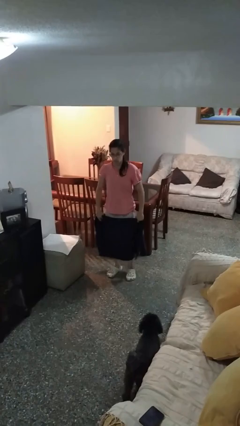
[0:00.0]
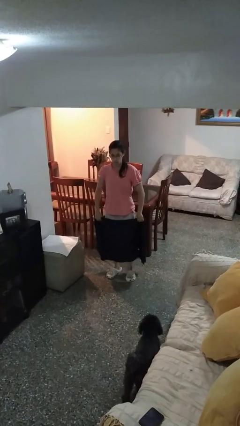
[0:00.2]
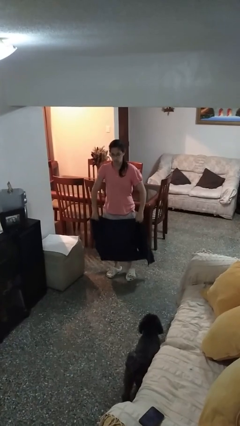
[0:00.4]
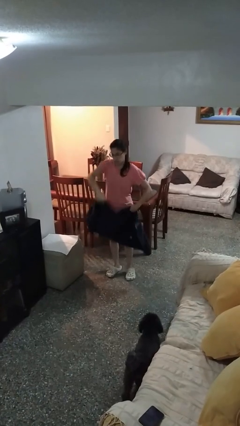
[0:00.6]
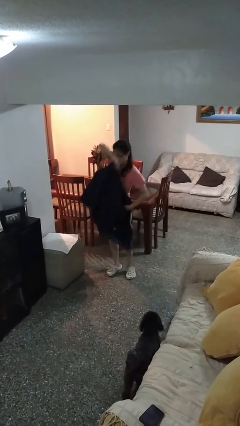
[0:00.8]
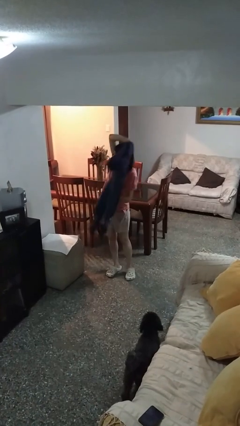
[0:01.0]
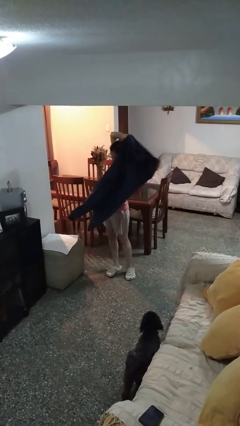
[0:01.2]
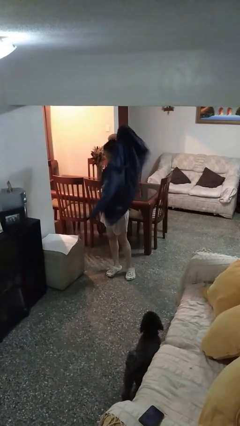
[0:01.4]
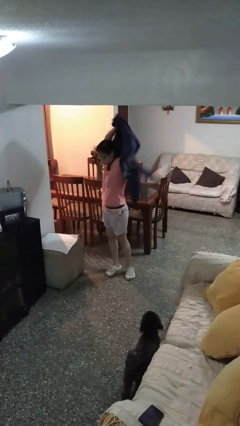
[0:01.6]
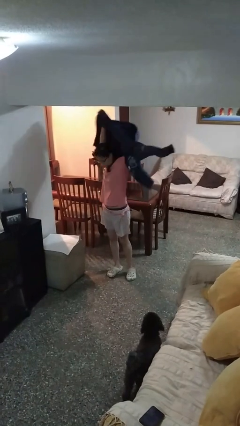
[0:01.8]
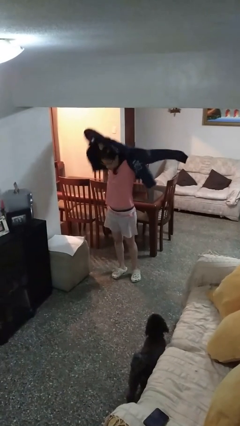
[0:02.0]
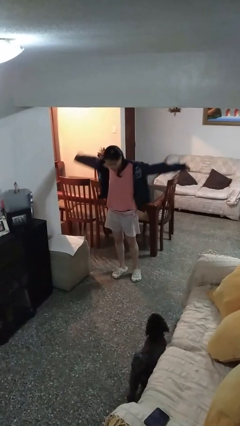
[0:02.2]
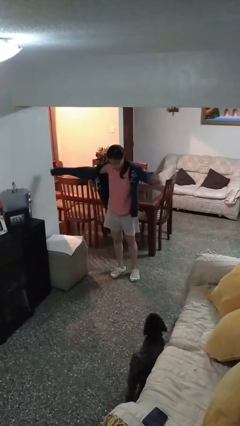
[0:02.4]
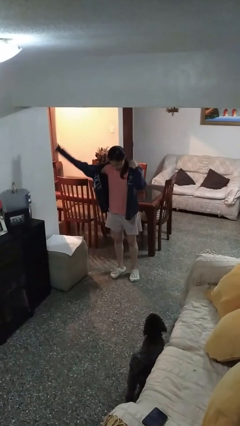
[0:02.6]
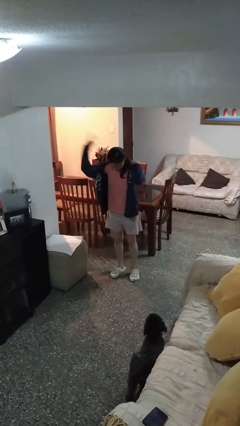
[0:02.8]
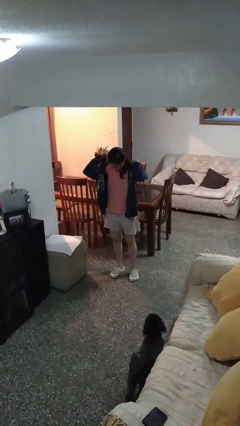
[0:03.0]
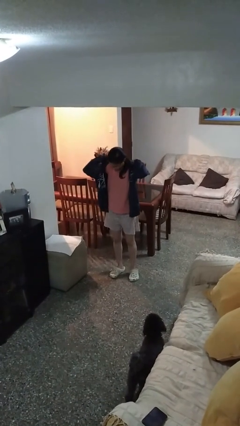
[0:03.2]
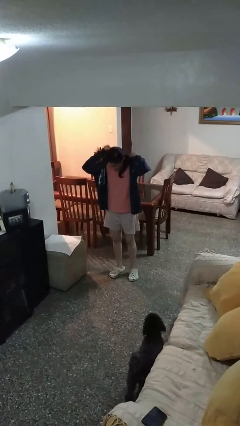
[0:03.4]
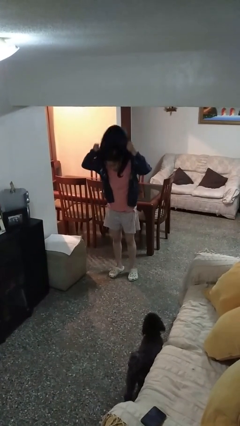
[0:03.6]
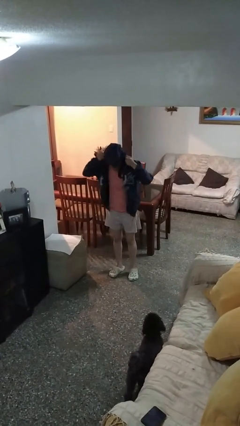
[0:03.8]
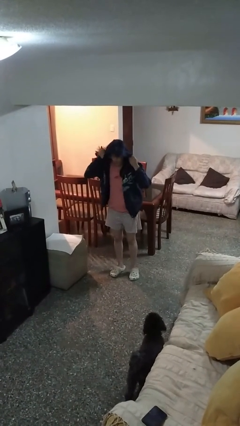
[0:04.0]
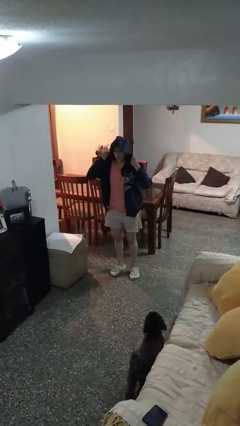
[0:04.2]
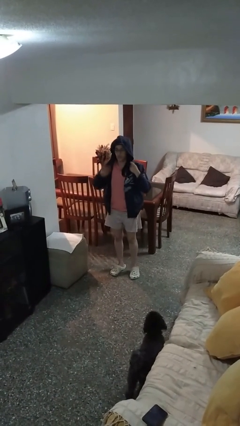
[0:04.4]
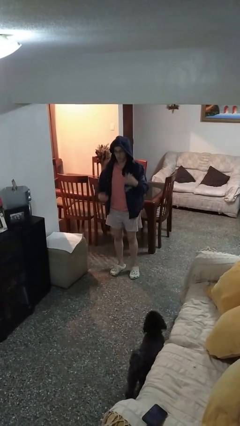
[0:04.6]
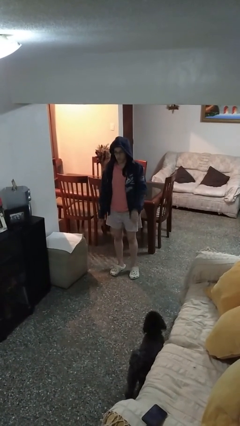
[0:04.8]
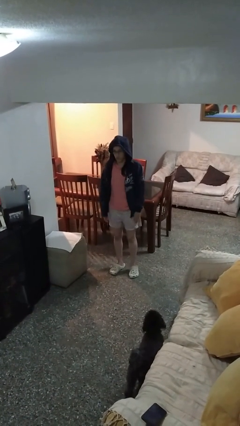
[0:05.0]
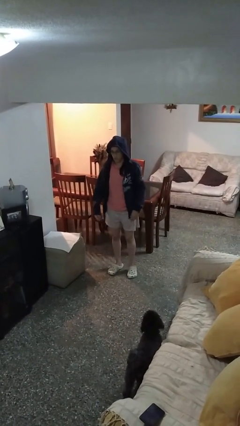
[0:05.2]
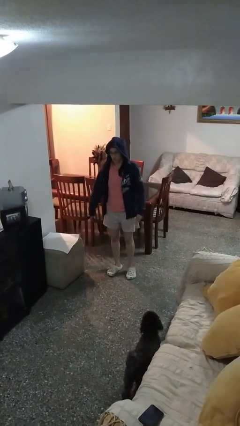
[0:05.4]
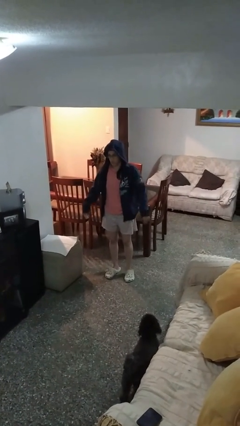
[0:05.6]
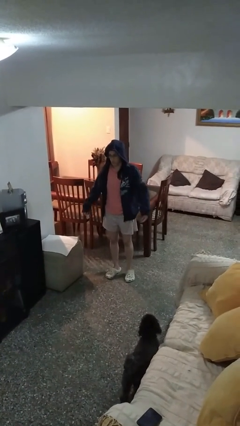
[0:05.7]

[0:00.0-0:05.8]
person puts on hoodie

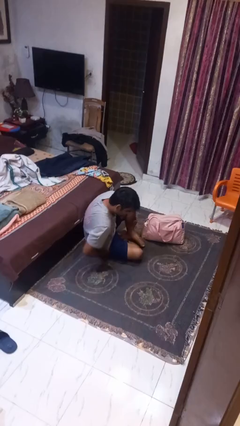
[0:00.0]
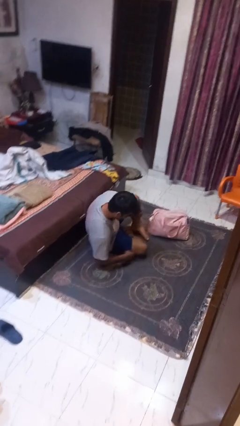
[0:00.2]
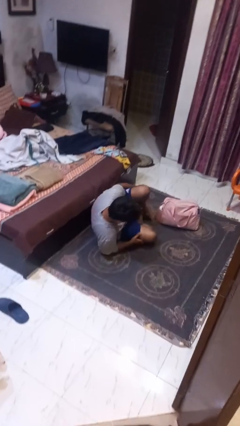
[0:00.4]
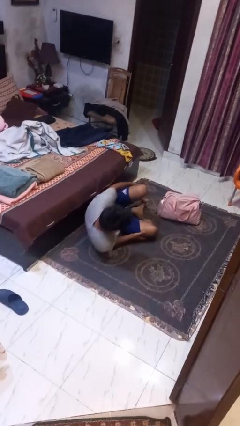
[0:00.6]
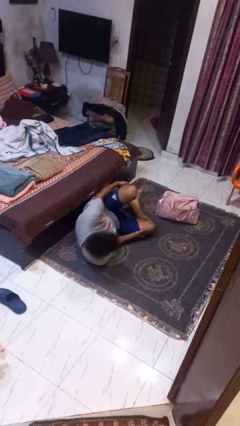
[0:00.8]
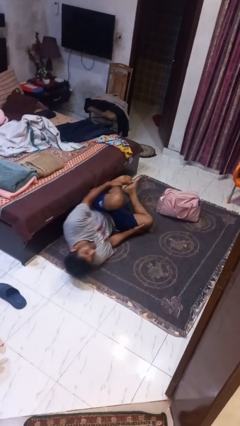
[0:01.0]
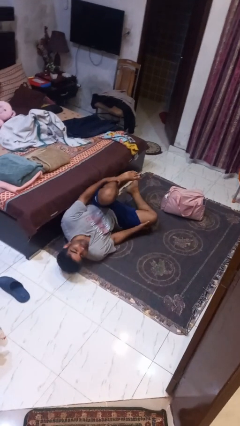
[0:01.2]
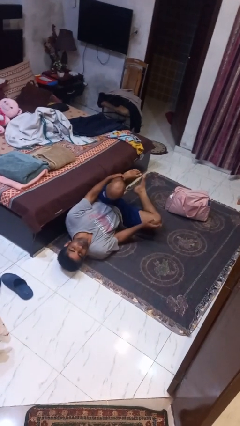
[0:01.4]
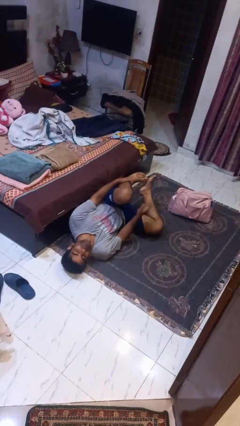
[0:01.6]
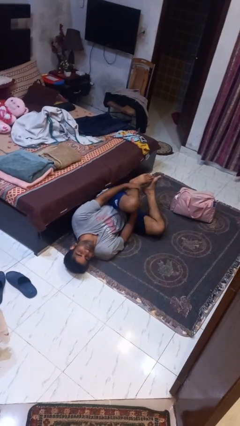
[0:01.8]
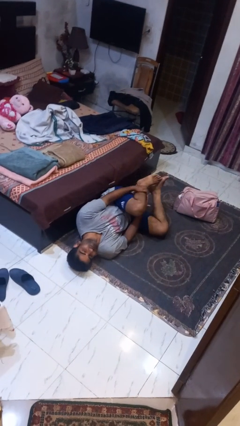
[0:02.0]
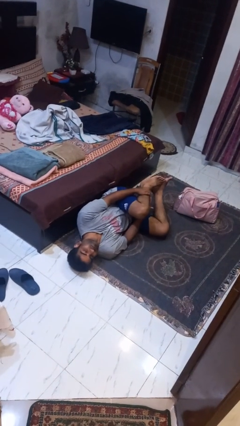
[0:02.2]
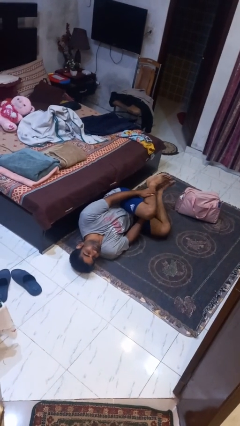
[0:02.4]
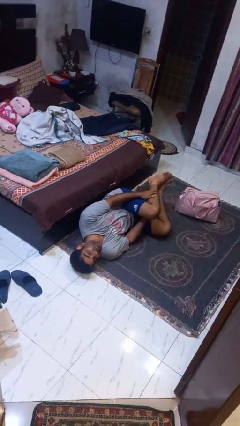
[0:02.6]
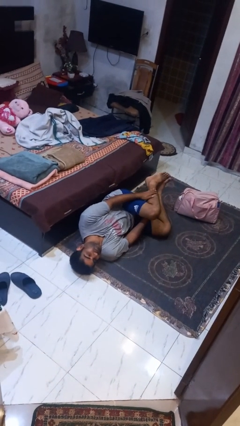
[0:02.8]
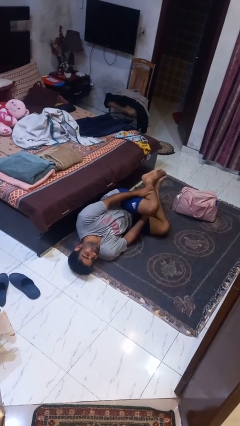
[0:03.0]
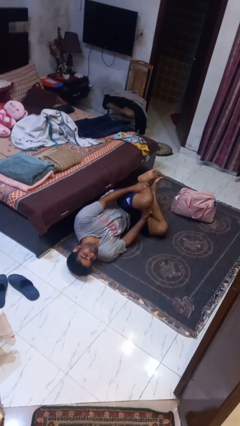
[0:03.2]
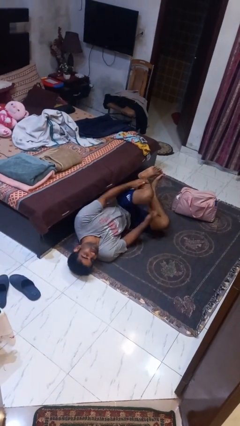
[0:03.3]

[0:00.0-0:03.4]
person lies down on floor

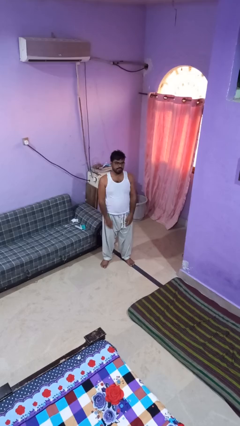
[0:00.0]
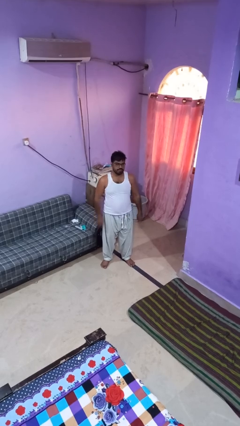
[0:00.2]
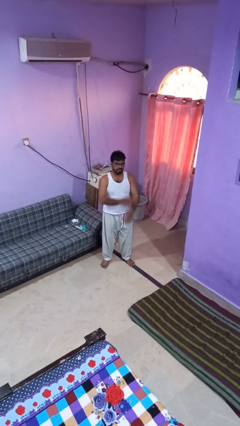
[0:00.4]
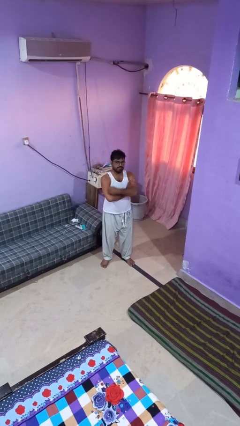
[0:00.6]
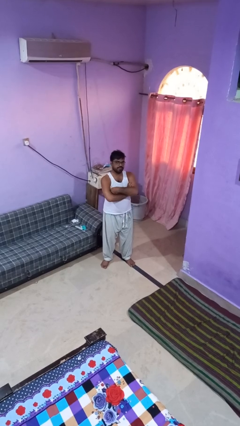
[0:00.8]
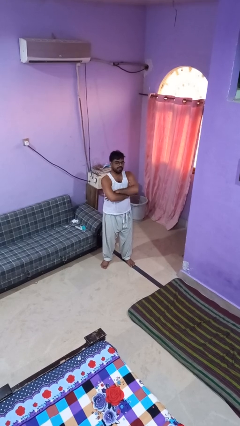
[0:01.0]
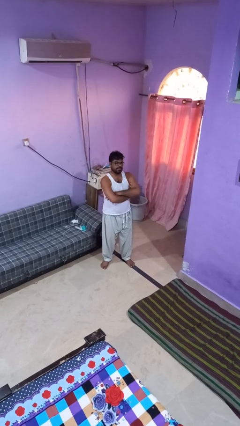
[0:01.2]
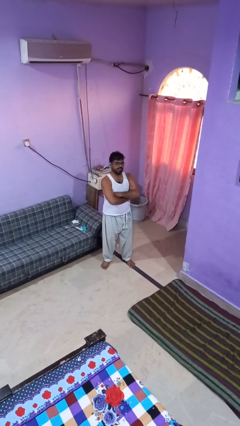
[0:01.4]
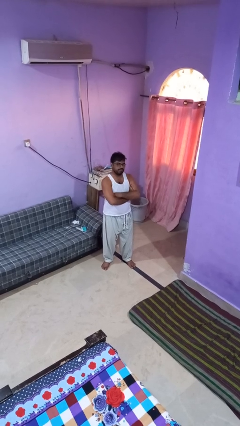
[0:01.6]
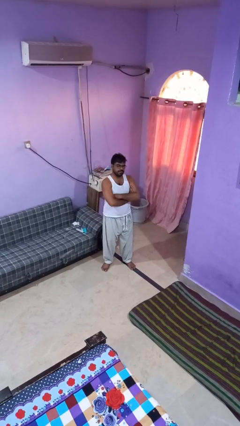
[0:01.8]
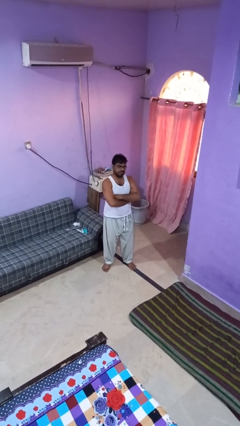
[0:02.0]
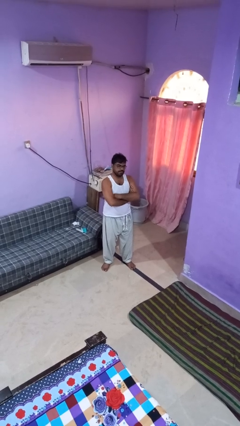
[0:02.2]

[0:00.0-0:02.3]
person crosses arms

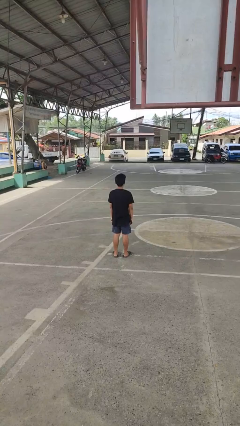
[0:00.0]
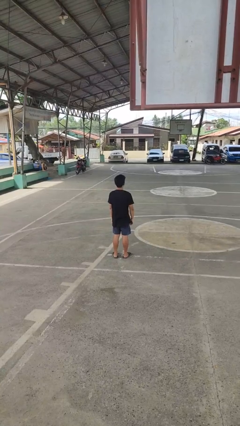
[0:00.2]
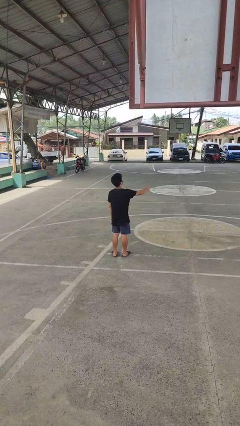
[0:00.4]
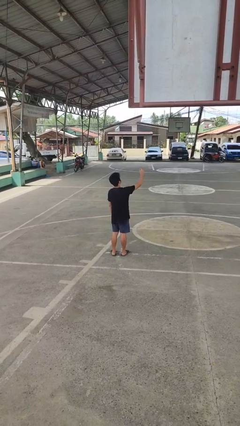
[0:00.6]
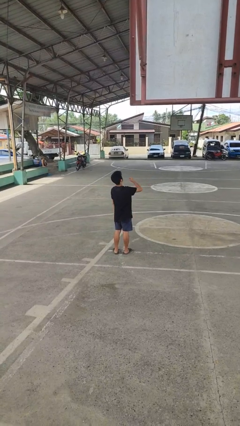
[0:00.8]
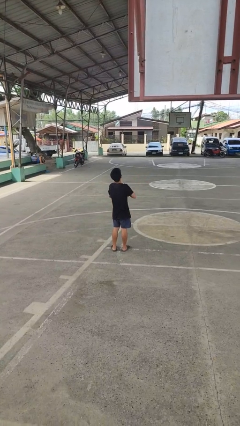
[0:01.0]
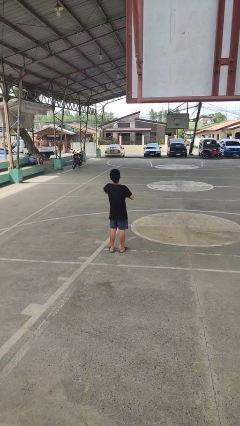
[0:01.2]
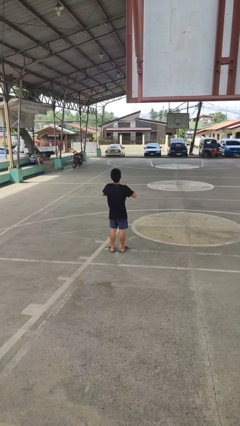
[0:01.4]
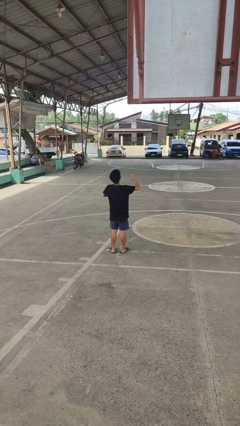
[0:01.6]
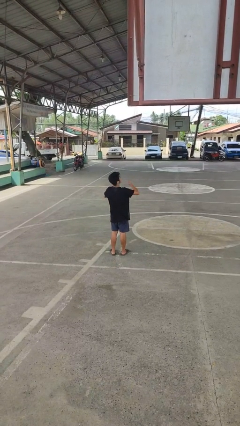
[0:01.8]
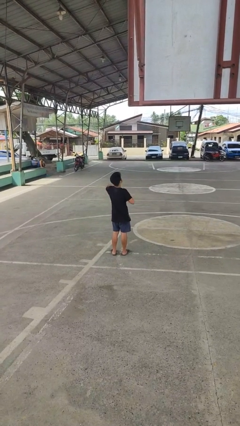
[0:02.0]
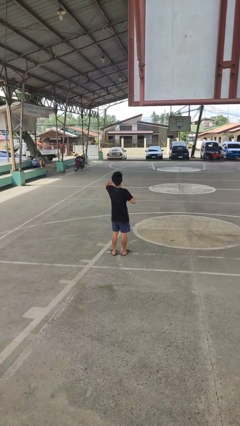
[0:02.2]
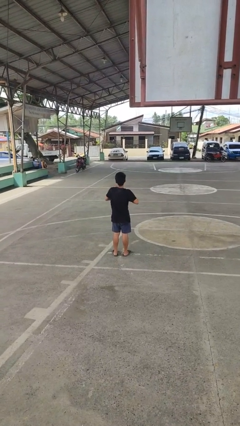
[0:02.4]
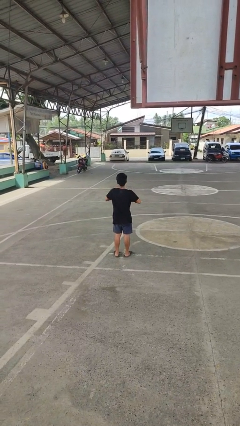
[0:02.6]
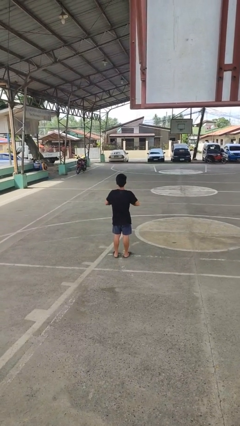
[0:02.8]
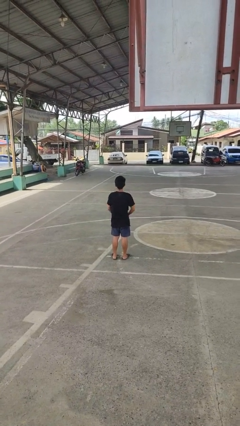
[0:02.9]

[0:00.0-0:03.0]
person drums on chest

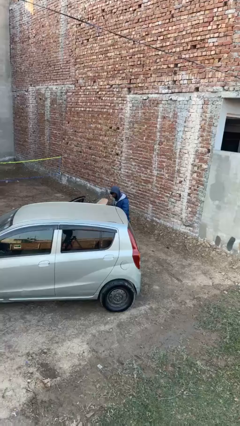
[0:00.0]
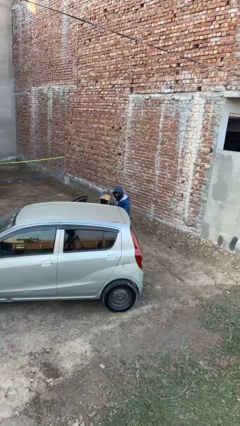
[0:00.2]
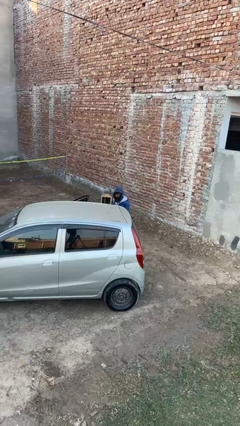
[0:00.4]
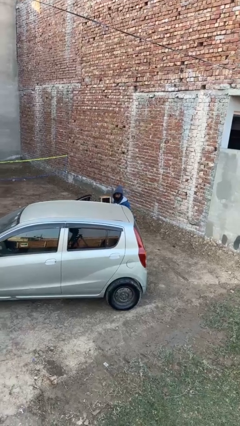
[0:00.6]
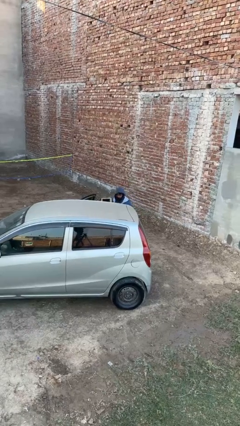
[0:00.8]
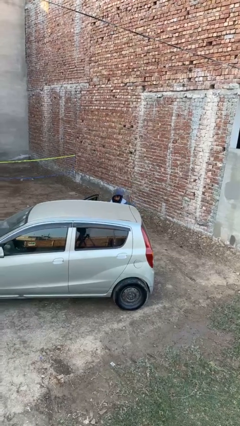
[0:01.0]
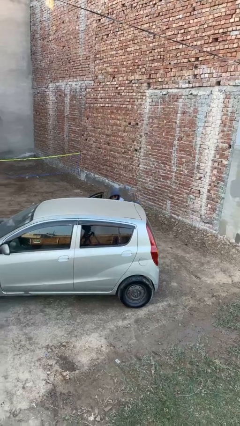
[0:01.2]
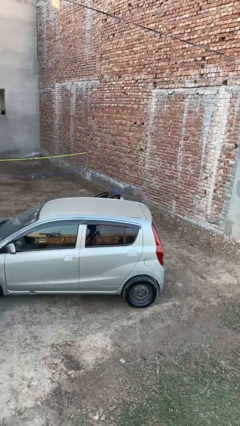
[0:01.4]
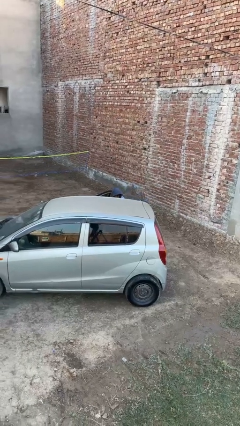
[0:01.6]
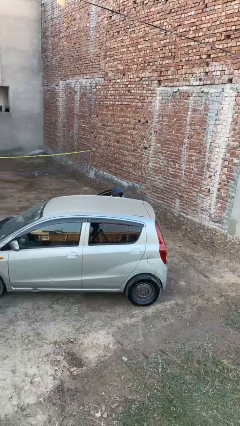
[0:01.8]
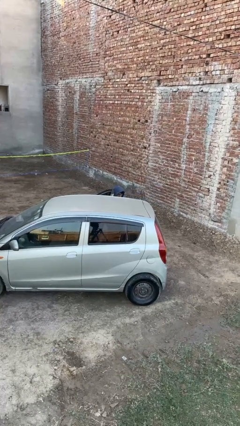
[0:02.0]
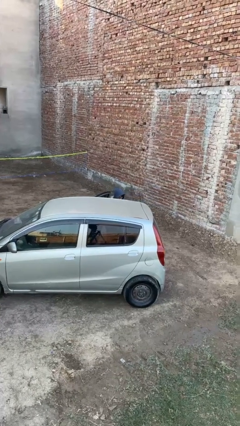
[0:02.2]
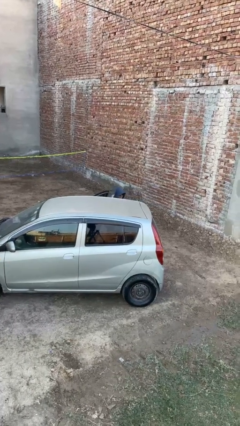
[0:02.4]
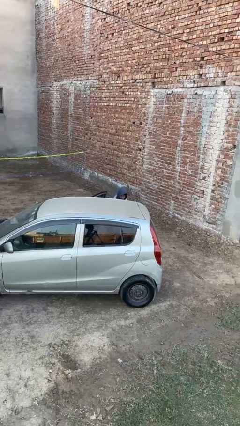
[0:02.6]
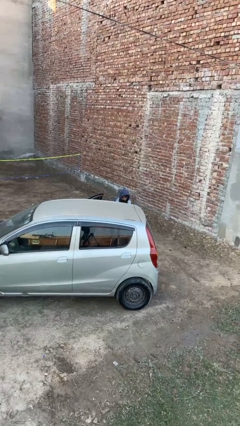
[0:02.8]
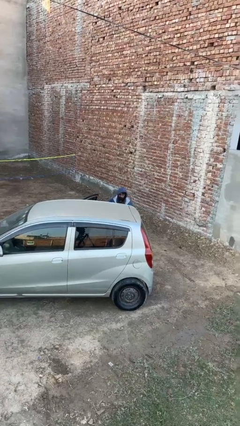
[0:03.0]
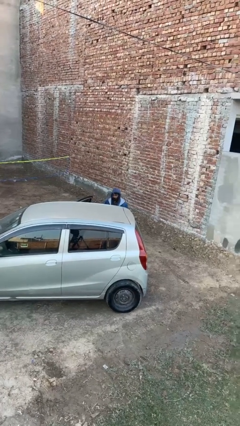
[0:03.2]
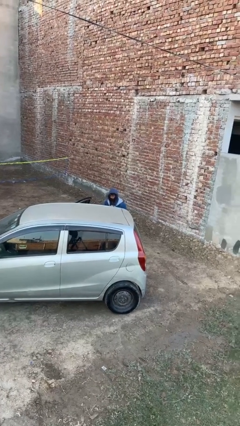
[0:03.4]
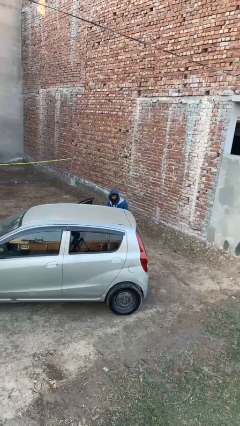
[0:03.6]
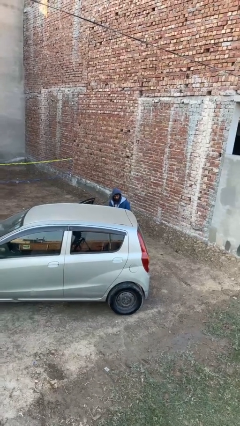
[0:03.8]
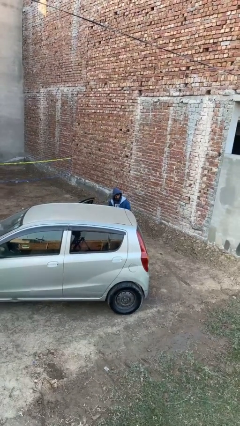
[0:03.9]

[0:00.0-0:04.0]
person loads car
